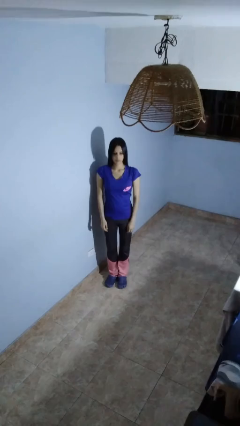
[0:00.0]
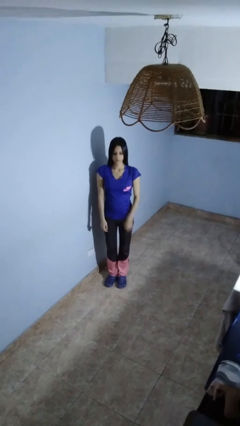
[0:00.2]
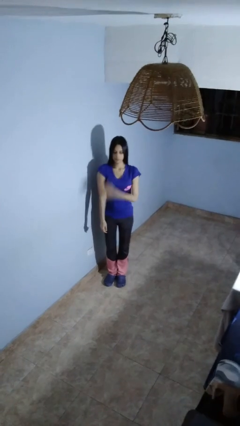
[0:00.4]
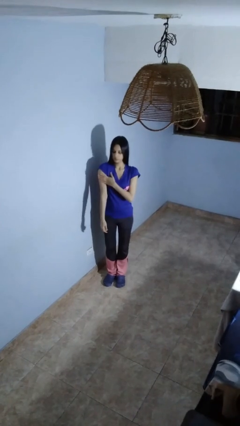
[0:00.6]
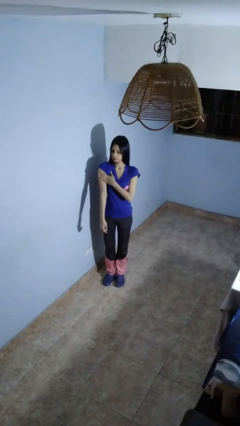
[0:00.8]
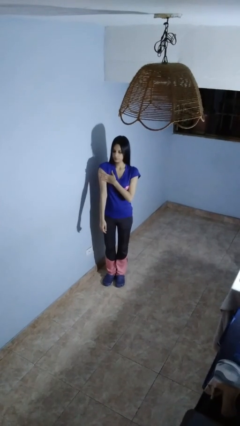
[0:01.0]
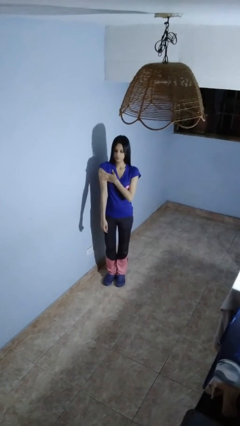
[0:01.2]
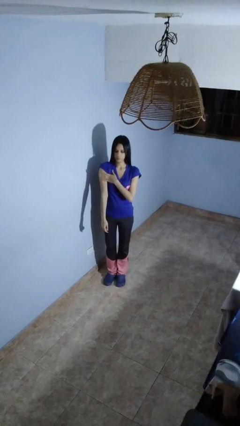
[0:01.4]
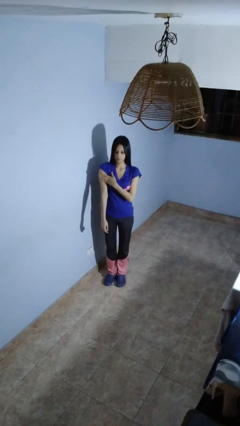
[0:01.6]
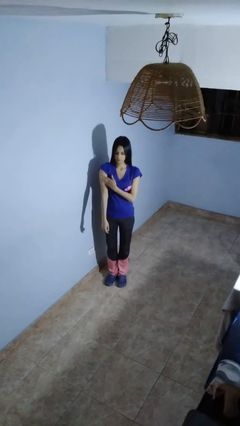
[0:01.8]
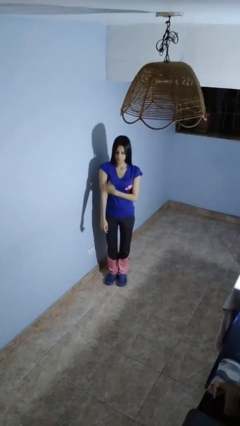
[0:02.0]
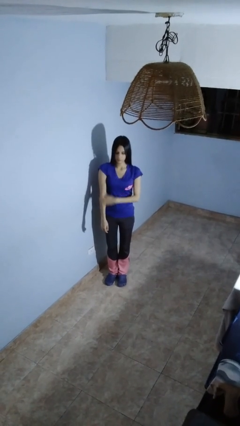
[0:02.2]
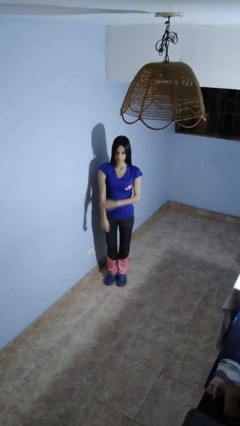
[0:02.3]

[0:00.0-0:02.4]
person swats bug

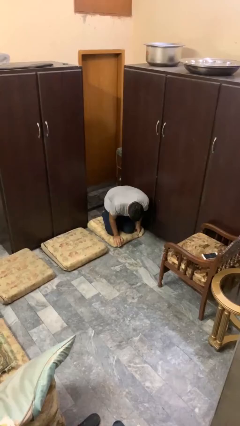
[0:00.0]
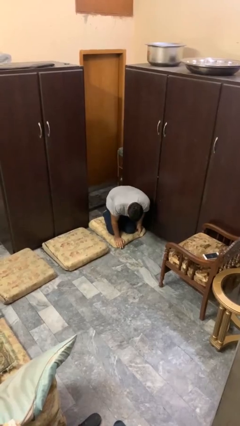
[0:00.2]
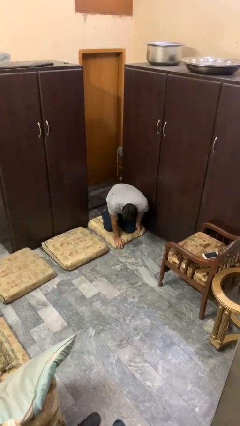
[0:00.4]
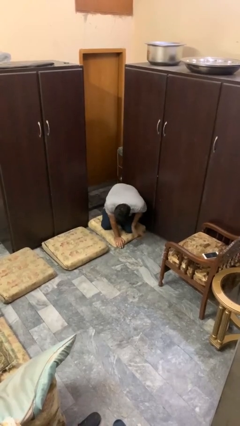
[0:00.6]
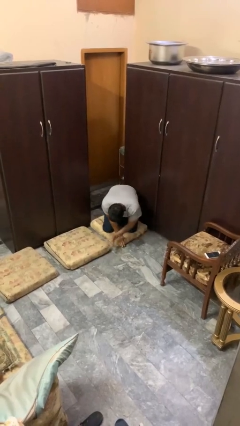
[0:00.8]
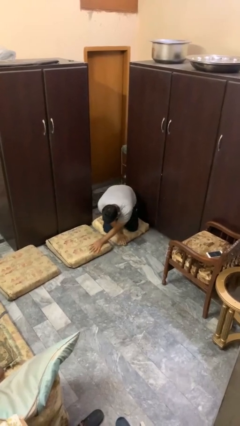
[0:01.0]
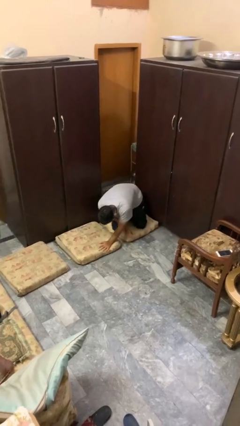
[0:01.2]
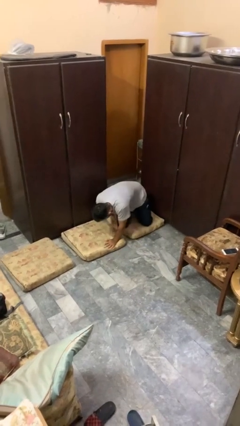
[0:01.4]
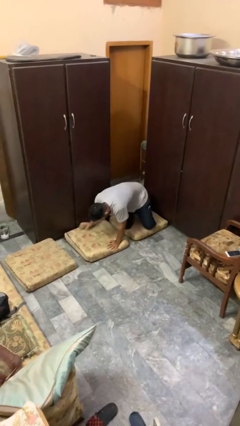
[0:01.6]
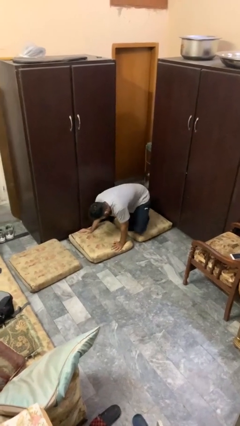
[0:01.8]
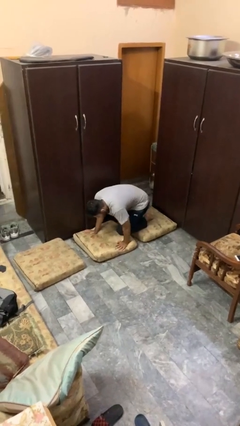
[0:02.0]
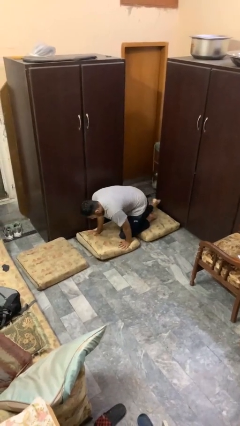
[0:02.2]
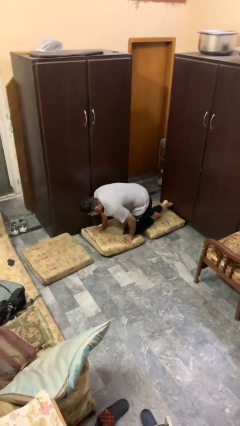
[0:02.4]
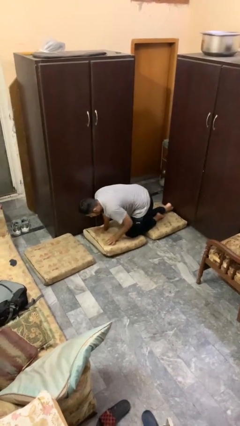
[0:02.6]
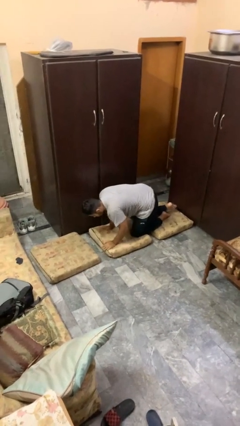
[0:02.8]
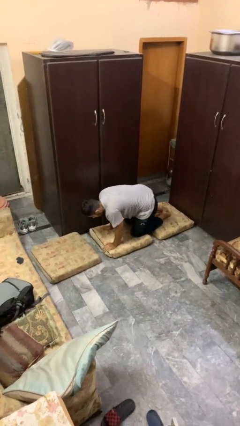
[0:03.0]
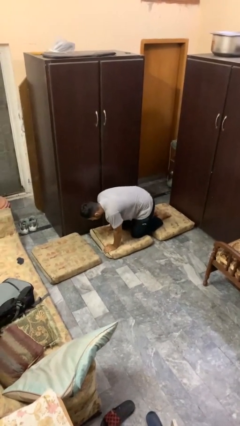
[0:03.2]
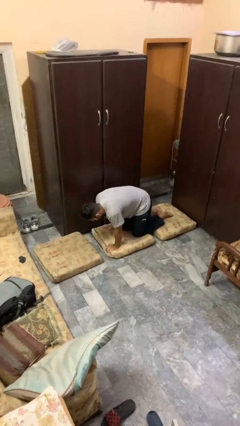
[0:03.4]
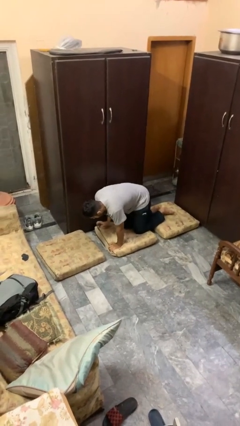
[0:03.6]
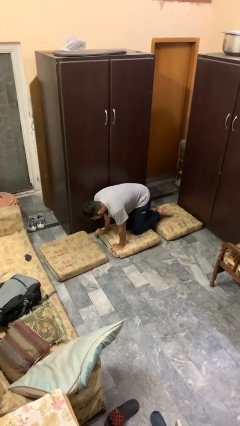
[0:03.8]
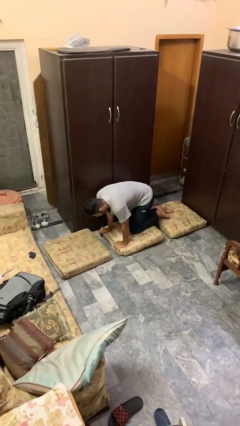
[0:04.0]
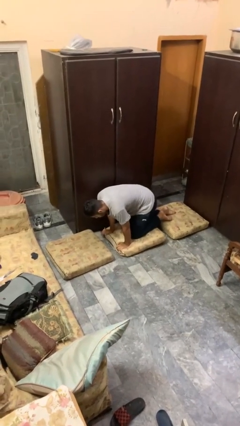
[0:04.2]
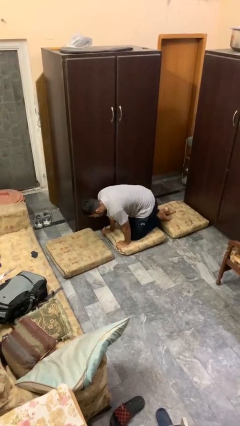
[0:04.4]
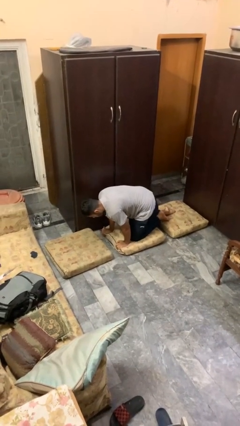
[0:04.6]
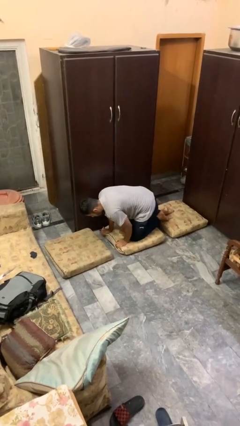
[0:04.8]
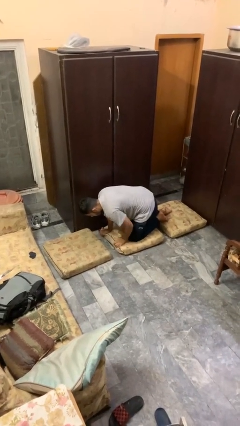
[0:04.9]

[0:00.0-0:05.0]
person crawls

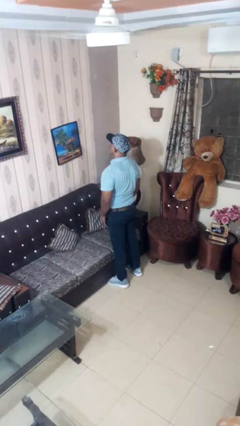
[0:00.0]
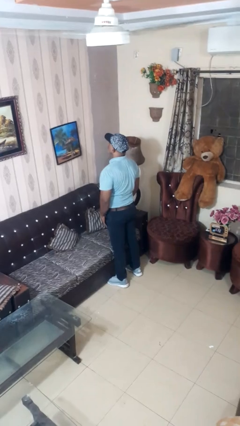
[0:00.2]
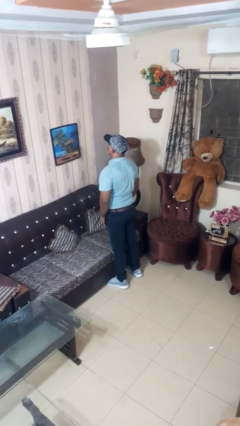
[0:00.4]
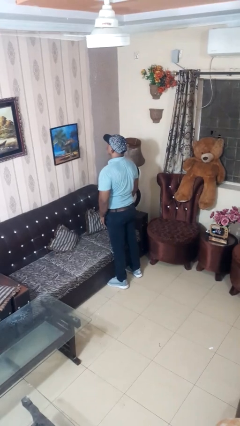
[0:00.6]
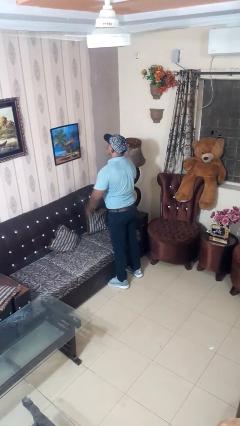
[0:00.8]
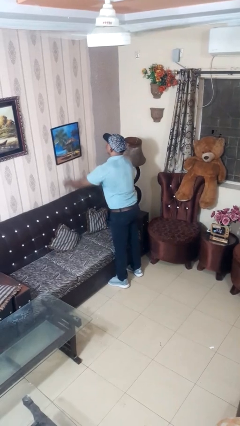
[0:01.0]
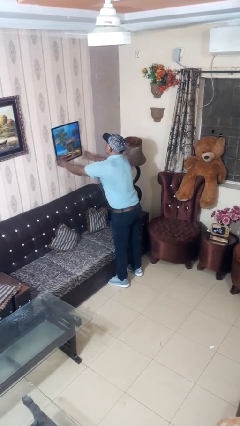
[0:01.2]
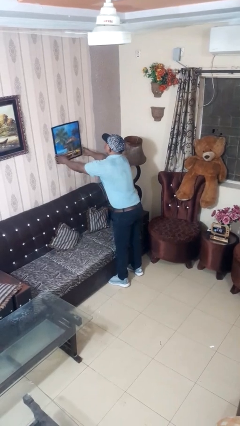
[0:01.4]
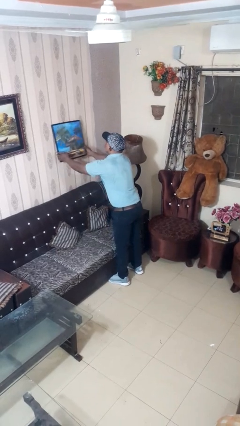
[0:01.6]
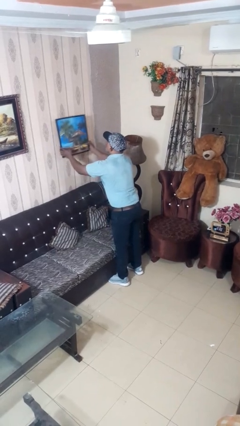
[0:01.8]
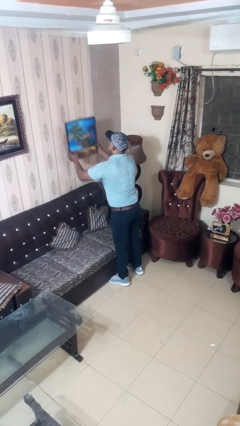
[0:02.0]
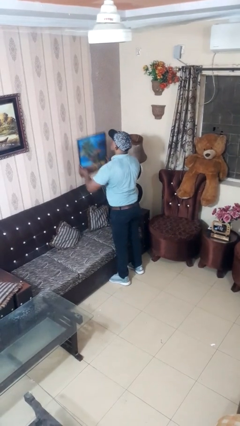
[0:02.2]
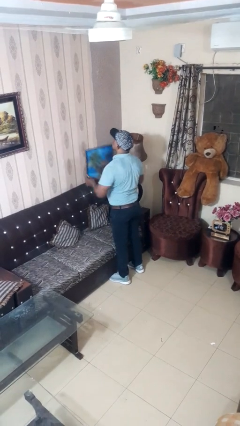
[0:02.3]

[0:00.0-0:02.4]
person takes down picture frame

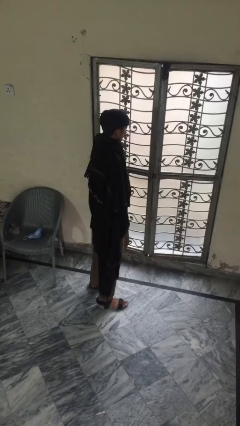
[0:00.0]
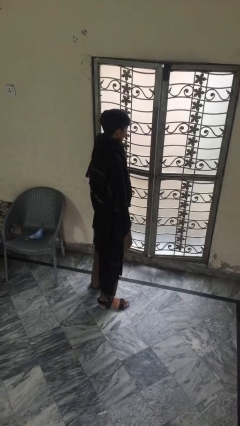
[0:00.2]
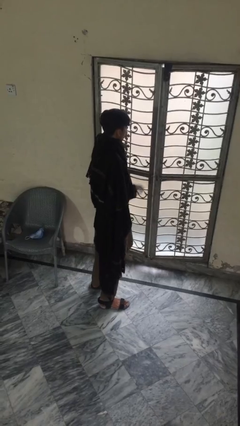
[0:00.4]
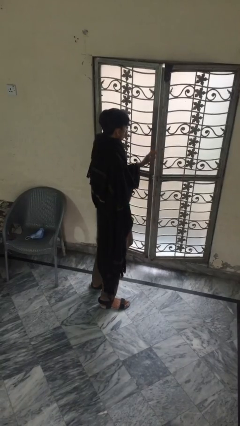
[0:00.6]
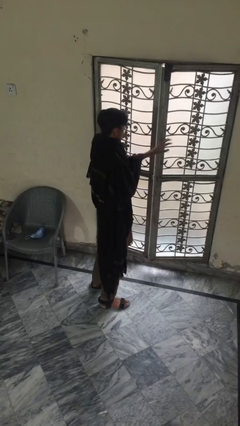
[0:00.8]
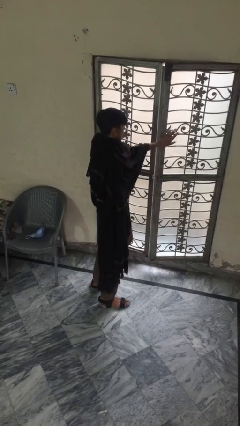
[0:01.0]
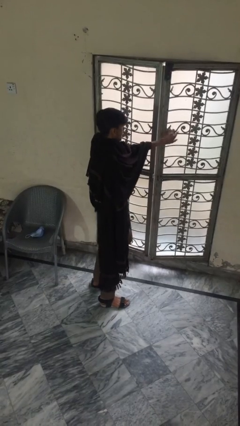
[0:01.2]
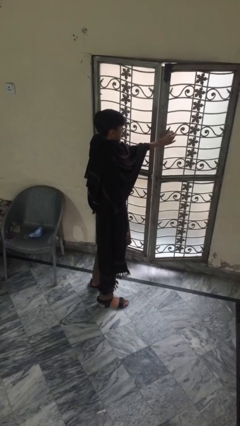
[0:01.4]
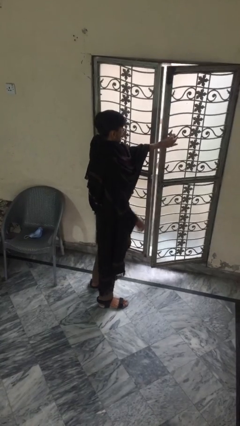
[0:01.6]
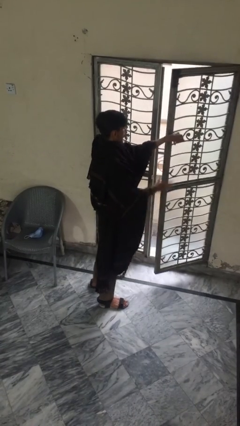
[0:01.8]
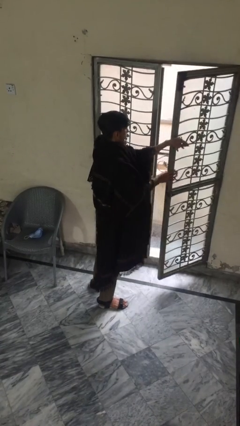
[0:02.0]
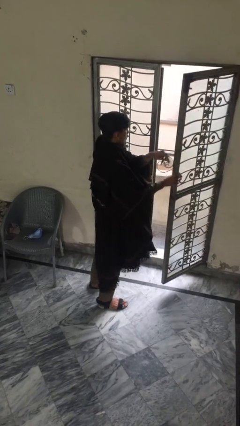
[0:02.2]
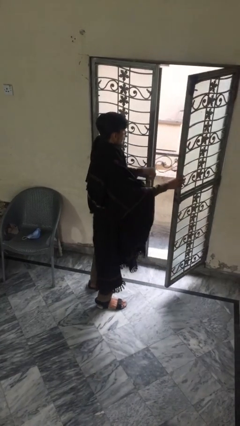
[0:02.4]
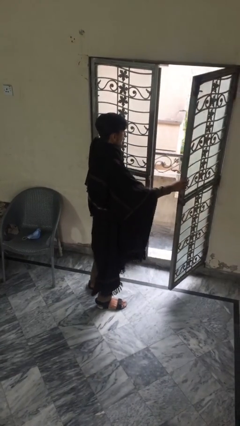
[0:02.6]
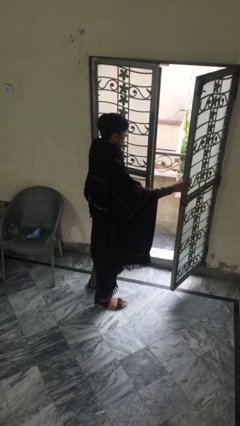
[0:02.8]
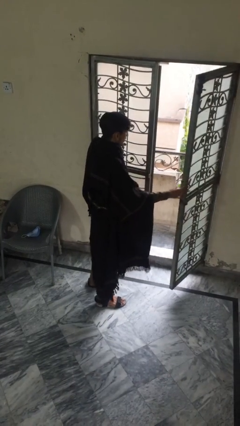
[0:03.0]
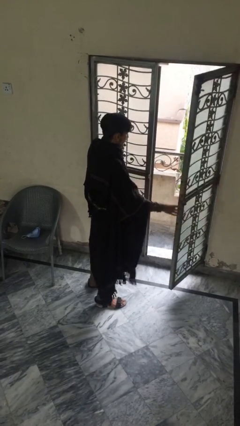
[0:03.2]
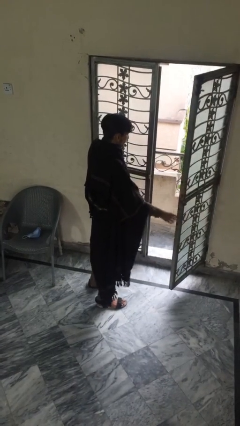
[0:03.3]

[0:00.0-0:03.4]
person opens facility door

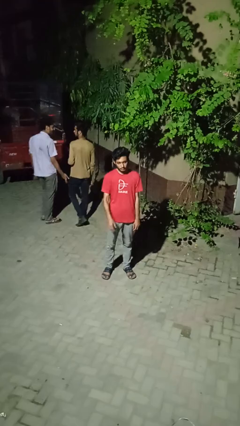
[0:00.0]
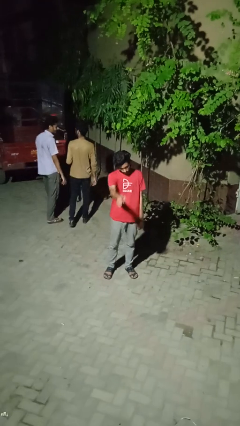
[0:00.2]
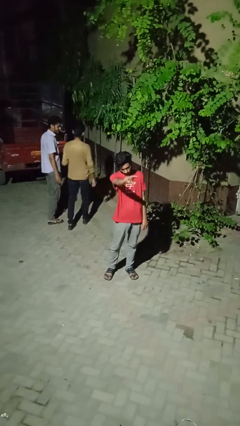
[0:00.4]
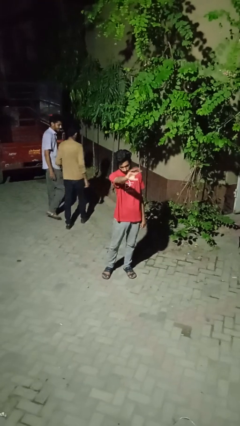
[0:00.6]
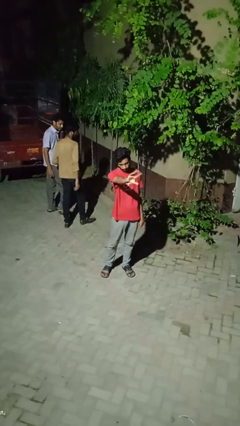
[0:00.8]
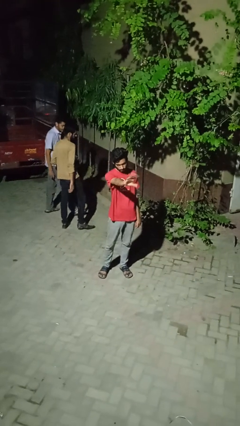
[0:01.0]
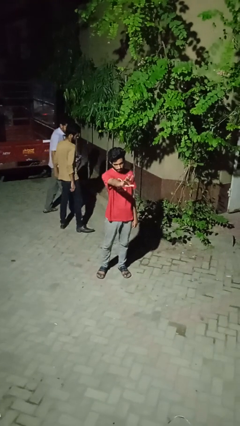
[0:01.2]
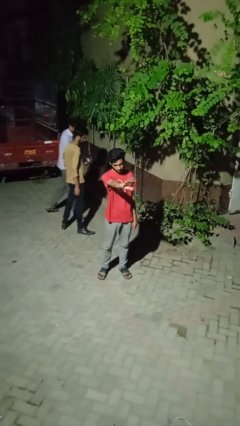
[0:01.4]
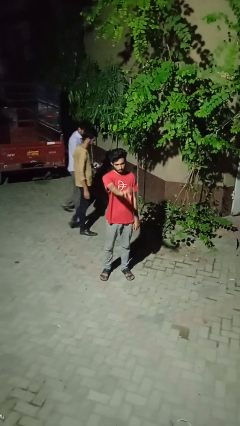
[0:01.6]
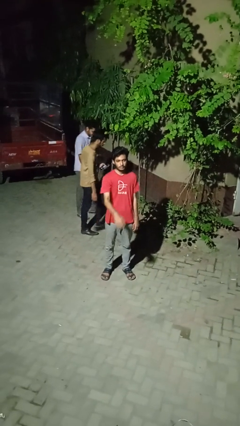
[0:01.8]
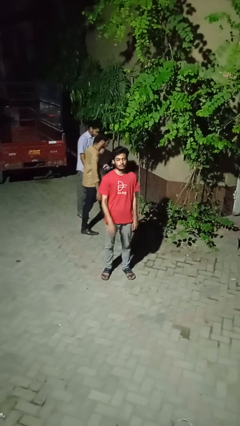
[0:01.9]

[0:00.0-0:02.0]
person waves at person

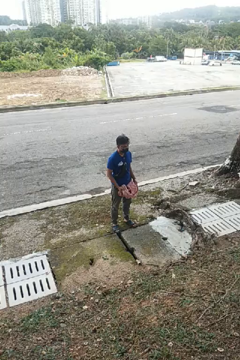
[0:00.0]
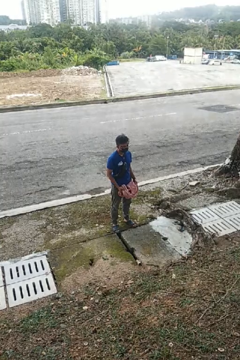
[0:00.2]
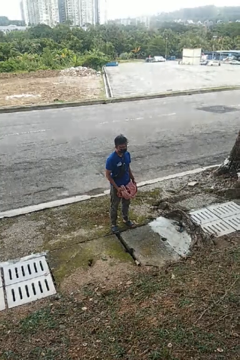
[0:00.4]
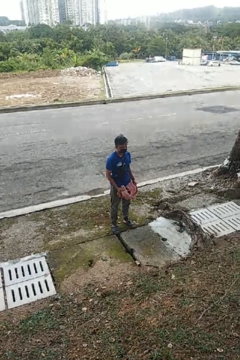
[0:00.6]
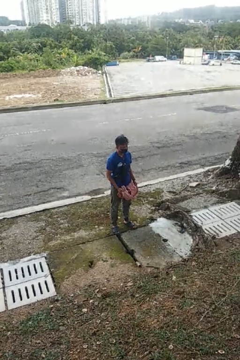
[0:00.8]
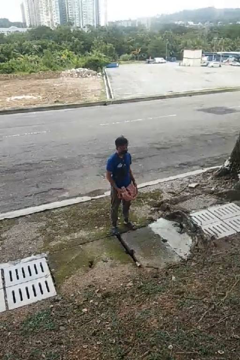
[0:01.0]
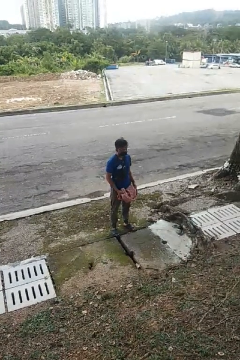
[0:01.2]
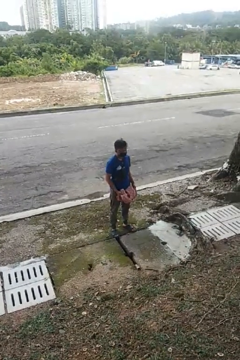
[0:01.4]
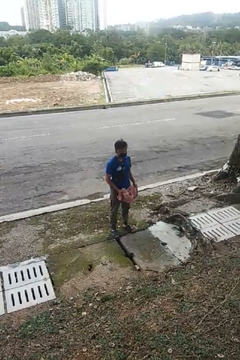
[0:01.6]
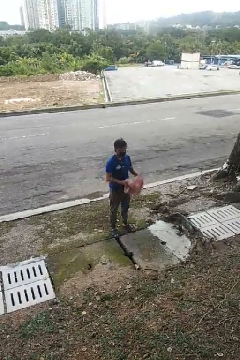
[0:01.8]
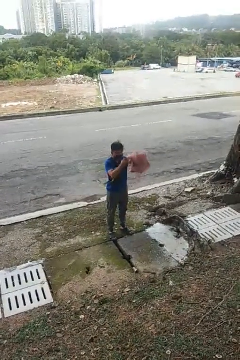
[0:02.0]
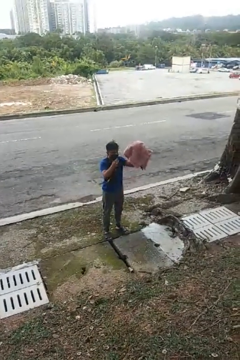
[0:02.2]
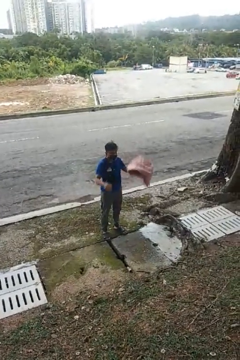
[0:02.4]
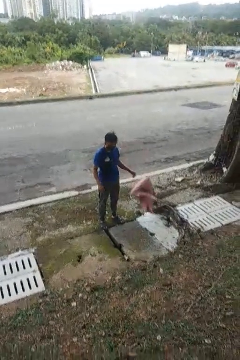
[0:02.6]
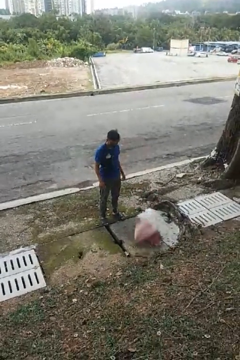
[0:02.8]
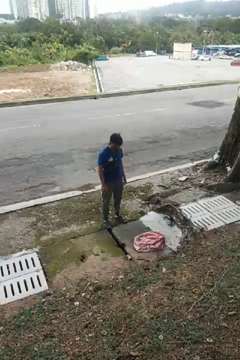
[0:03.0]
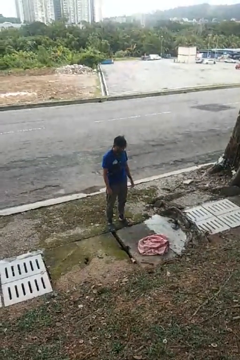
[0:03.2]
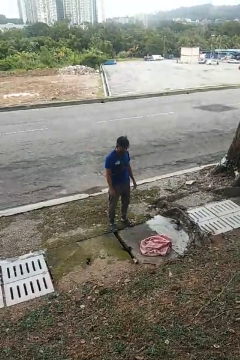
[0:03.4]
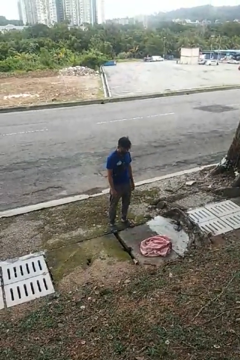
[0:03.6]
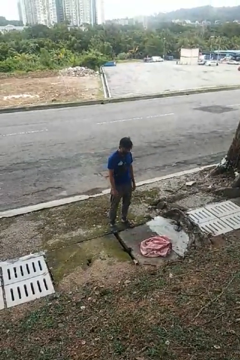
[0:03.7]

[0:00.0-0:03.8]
person throws object into air
